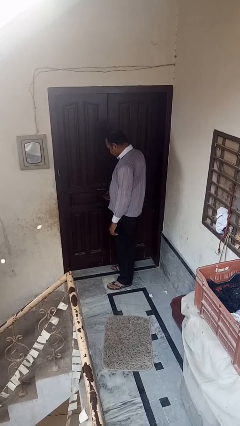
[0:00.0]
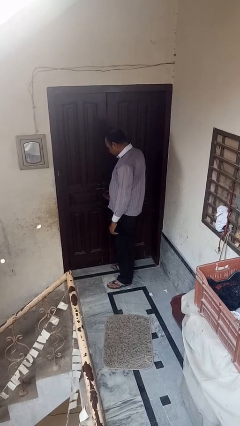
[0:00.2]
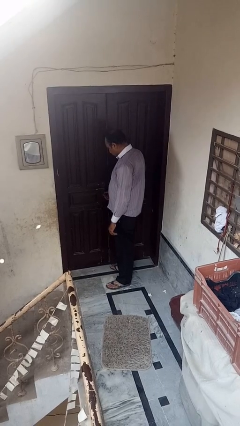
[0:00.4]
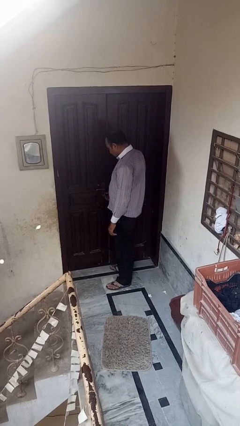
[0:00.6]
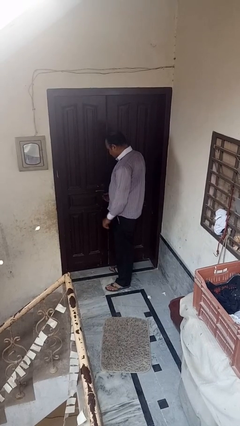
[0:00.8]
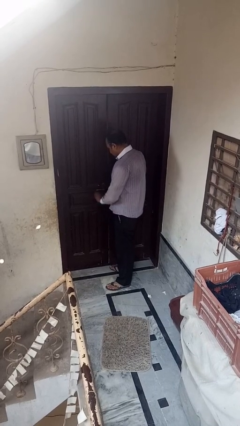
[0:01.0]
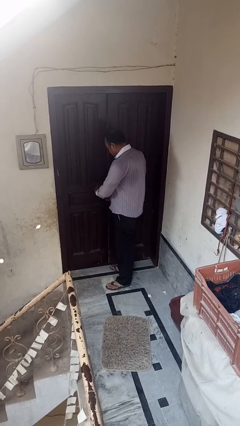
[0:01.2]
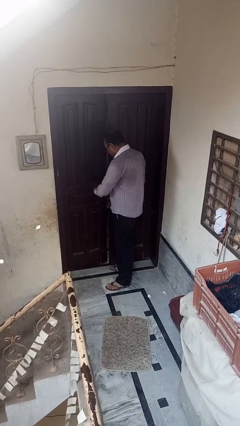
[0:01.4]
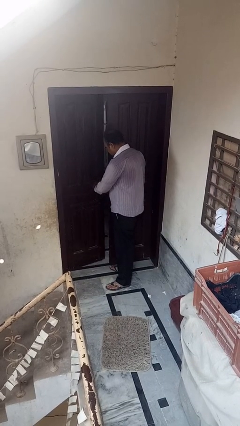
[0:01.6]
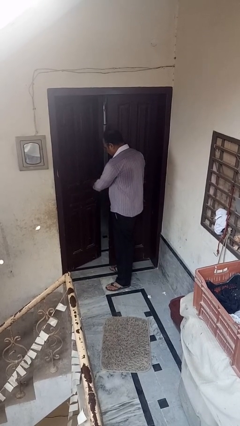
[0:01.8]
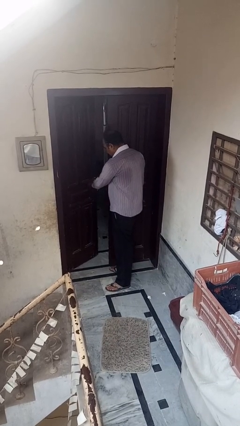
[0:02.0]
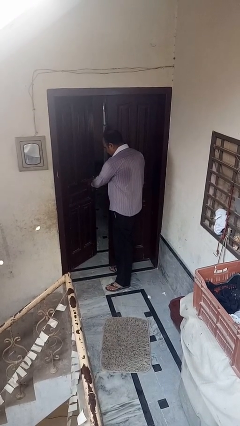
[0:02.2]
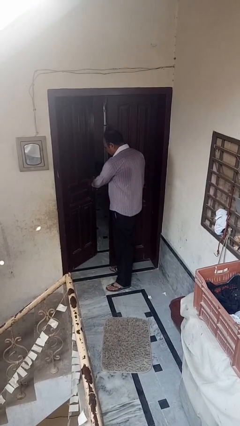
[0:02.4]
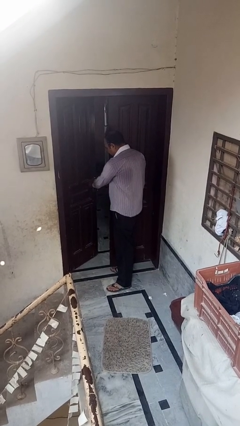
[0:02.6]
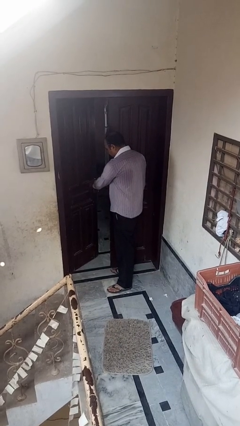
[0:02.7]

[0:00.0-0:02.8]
person opens facility door

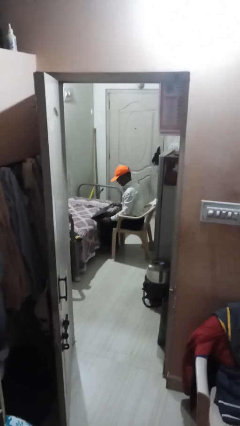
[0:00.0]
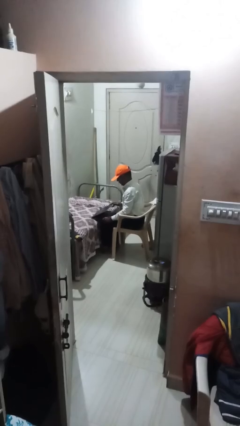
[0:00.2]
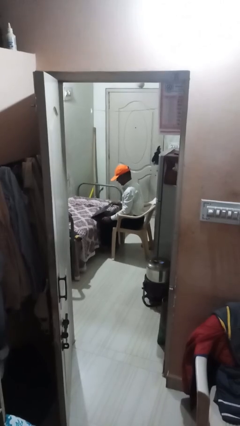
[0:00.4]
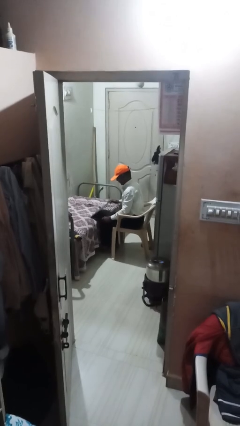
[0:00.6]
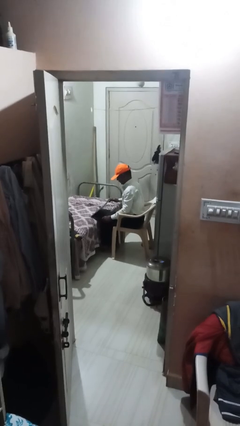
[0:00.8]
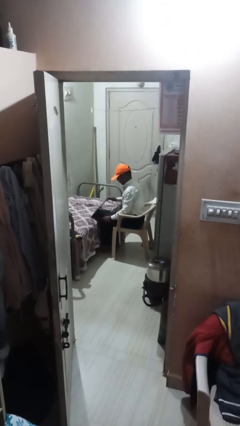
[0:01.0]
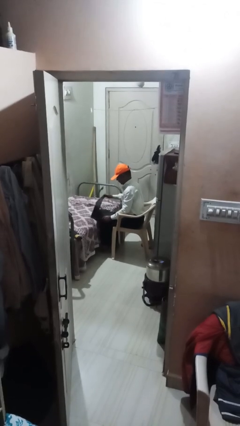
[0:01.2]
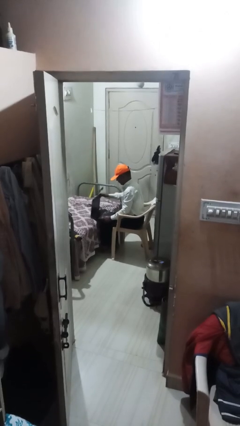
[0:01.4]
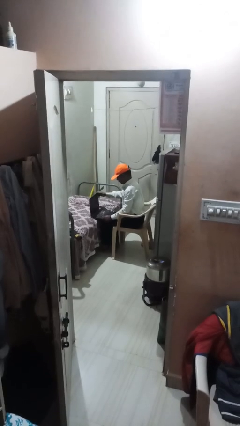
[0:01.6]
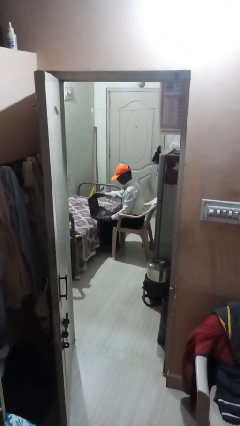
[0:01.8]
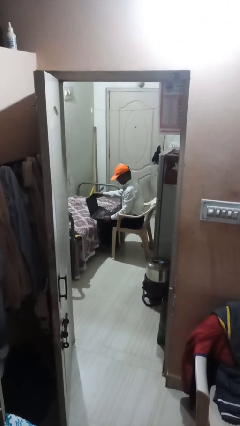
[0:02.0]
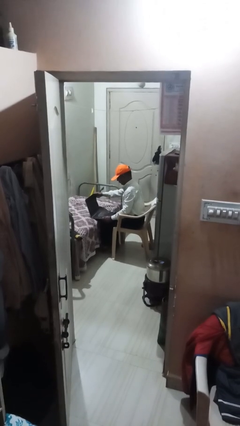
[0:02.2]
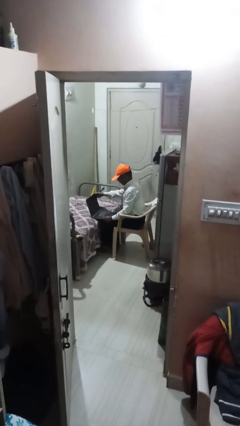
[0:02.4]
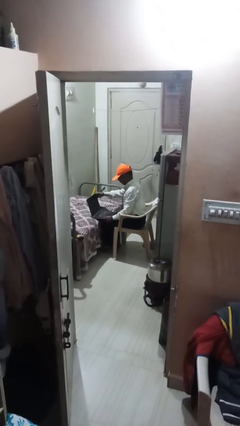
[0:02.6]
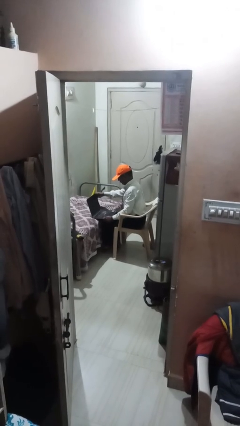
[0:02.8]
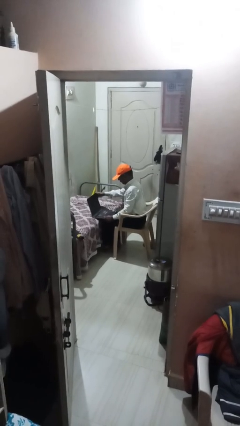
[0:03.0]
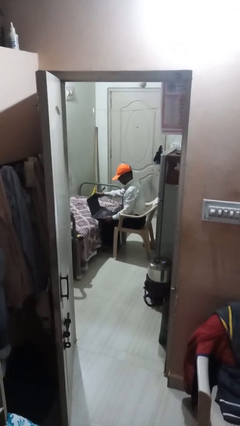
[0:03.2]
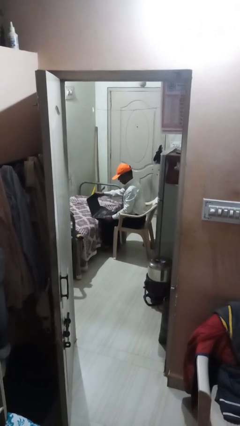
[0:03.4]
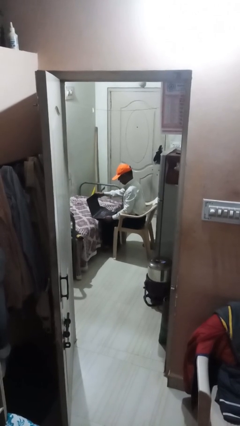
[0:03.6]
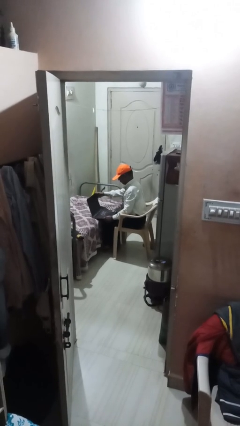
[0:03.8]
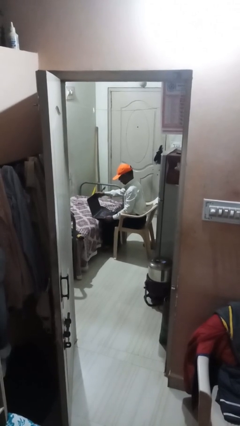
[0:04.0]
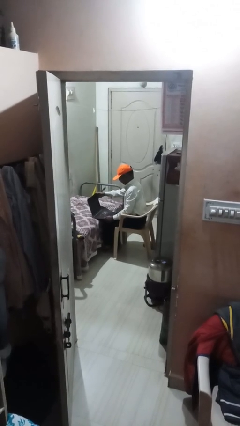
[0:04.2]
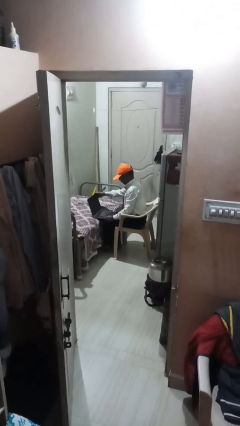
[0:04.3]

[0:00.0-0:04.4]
person interacts with laptop

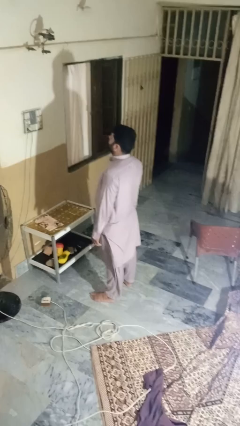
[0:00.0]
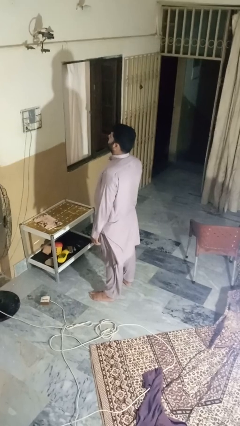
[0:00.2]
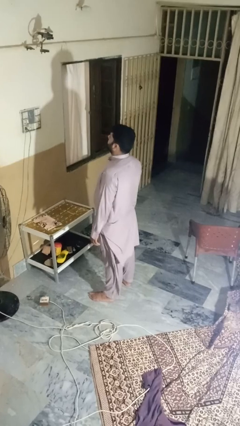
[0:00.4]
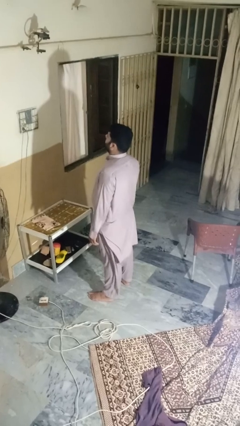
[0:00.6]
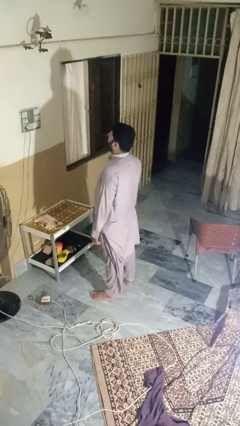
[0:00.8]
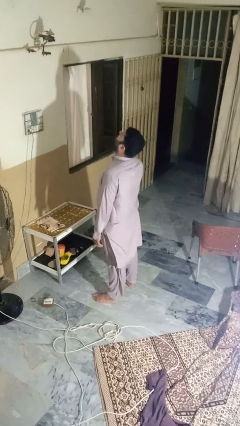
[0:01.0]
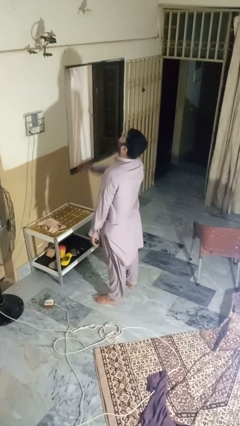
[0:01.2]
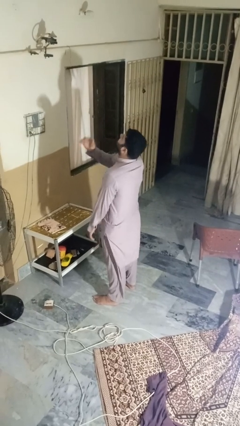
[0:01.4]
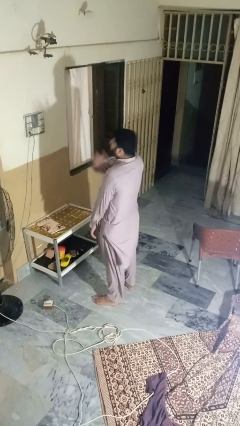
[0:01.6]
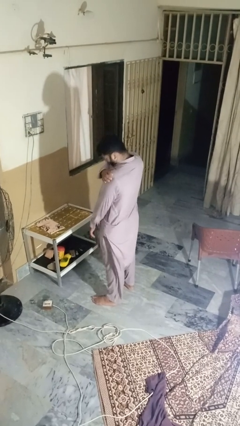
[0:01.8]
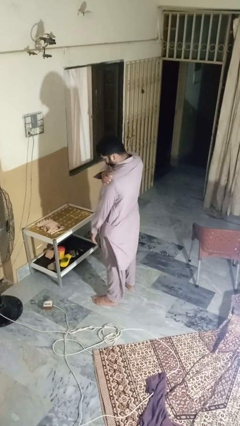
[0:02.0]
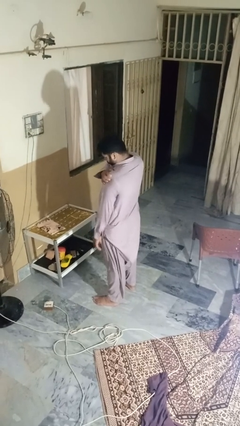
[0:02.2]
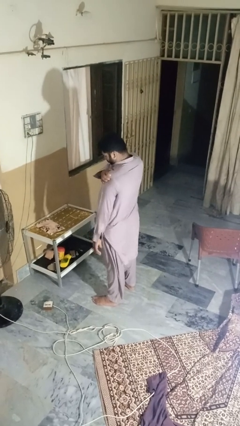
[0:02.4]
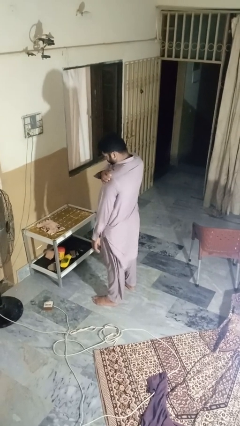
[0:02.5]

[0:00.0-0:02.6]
person shrugs

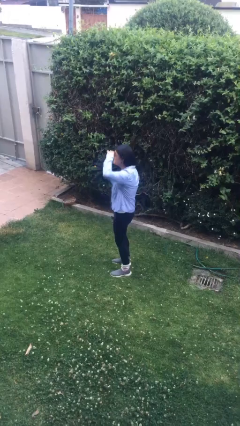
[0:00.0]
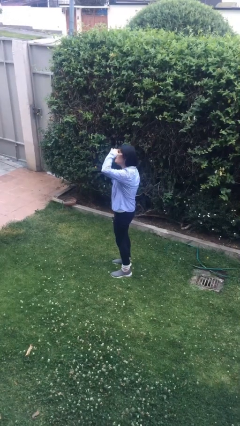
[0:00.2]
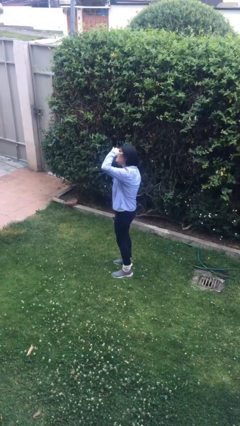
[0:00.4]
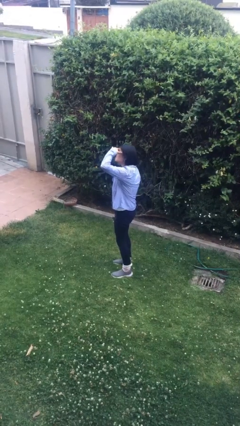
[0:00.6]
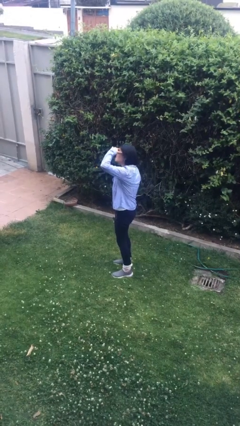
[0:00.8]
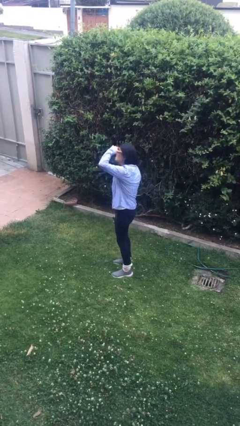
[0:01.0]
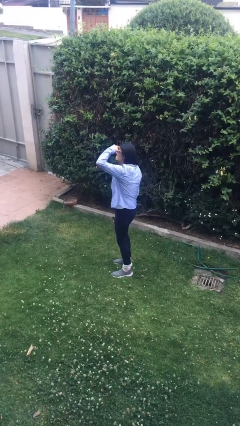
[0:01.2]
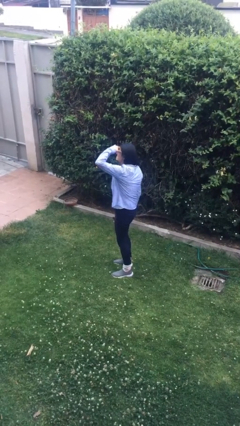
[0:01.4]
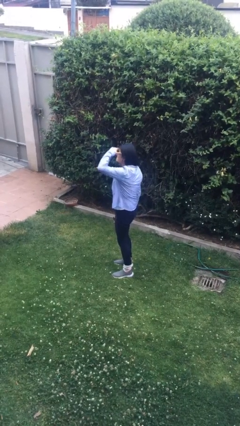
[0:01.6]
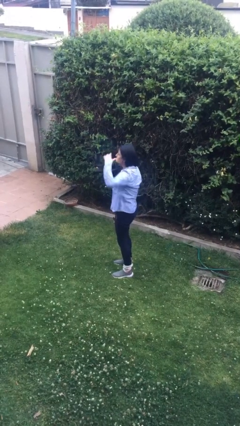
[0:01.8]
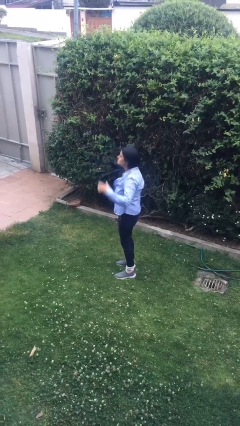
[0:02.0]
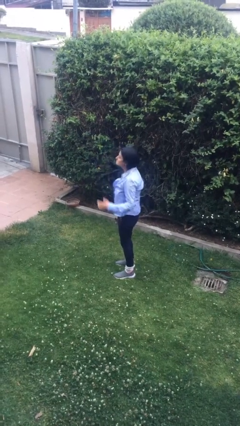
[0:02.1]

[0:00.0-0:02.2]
person shades eyes

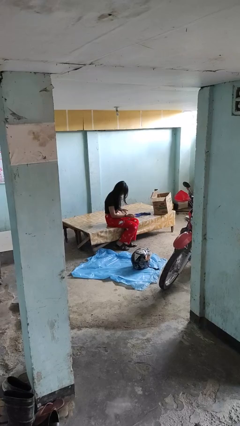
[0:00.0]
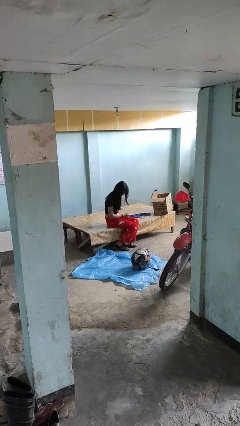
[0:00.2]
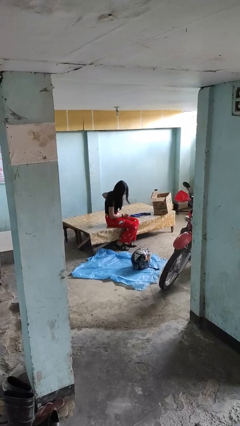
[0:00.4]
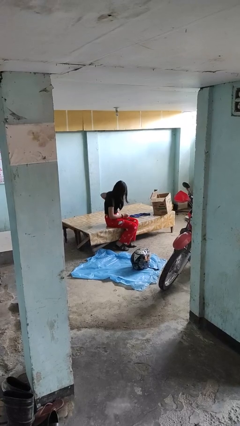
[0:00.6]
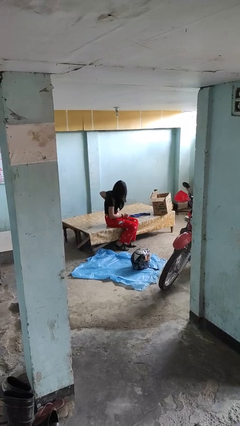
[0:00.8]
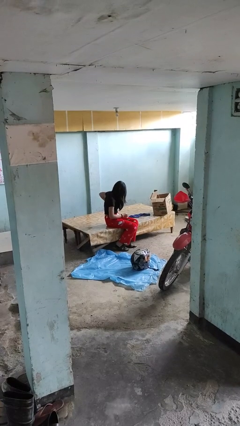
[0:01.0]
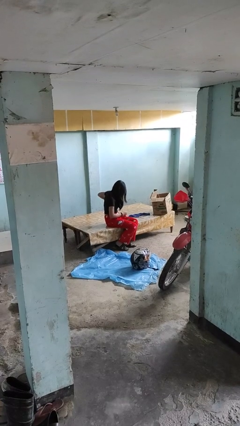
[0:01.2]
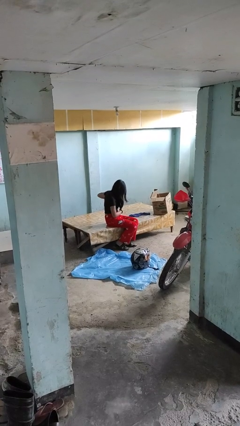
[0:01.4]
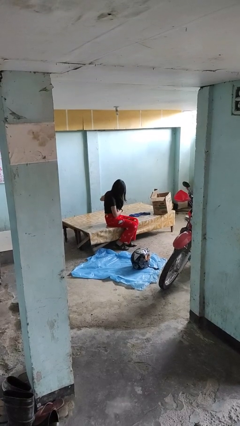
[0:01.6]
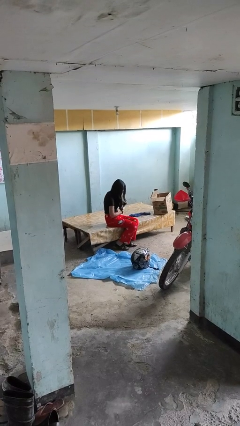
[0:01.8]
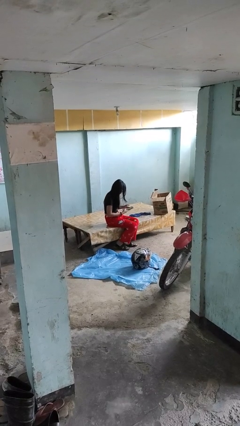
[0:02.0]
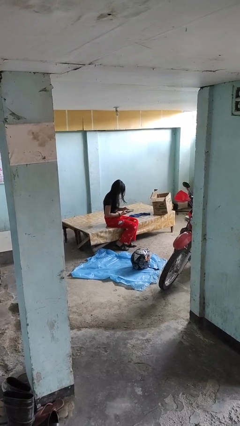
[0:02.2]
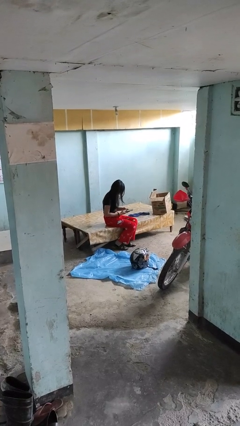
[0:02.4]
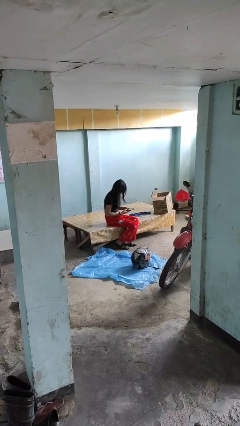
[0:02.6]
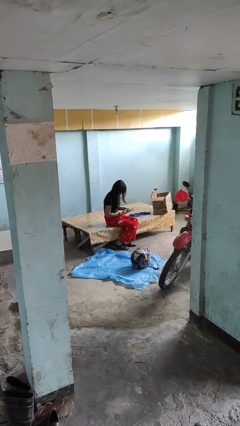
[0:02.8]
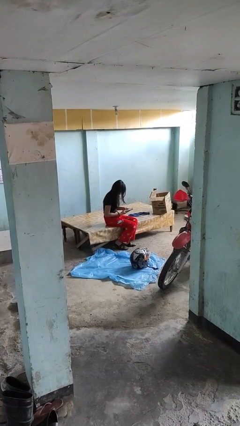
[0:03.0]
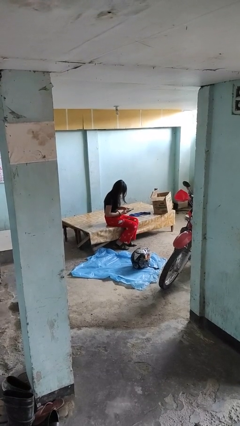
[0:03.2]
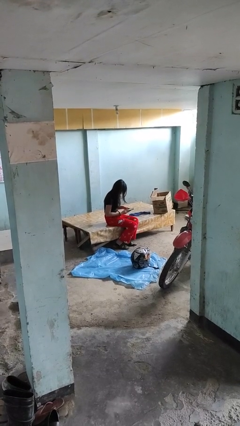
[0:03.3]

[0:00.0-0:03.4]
person takes phone from pocket

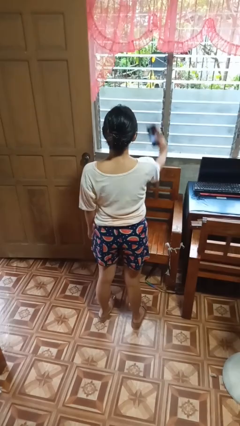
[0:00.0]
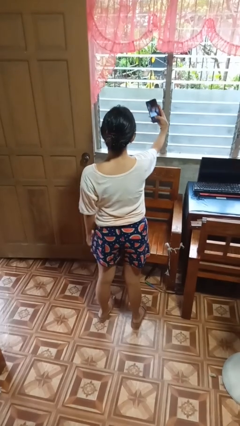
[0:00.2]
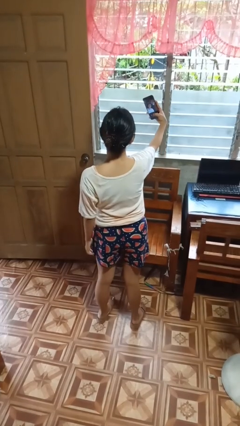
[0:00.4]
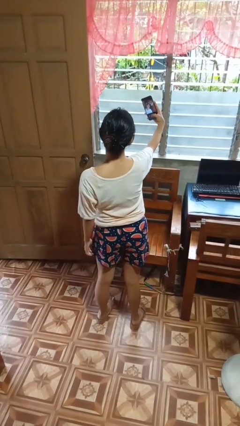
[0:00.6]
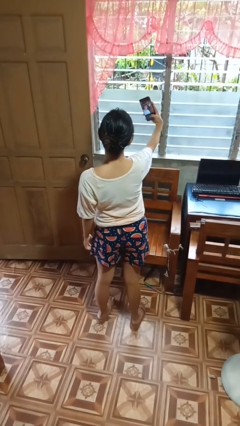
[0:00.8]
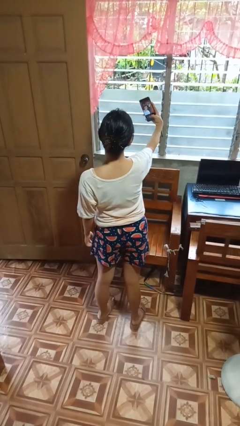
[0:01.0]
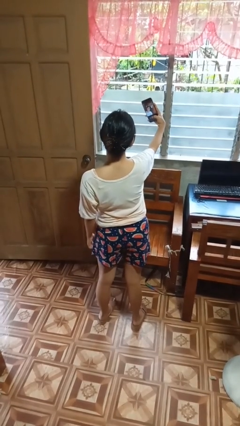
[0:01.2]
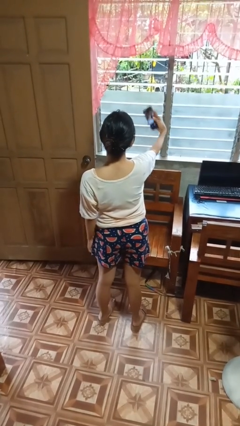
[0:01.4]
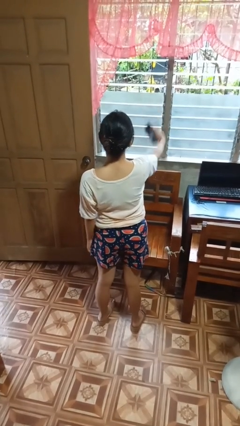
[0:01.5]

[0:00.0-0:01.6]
person takes selfie
